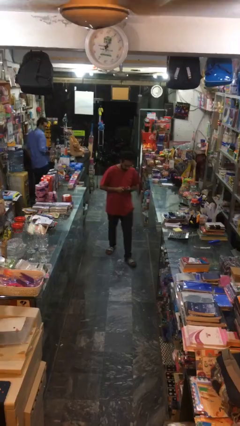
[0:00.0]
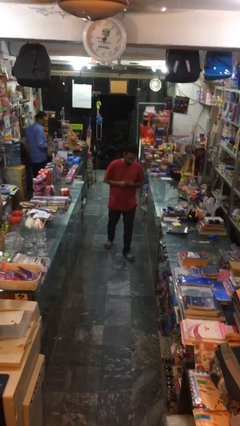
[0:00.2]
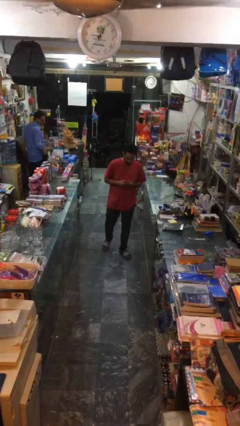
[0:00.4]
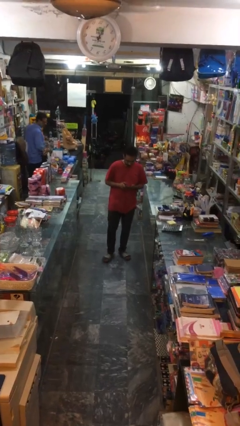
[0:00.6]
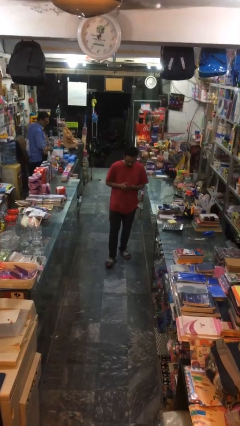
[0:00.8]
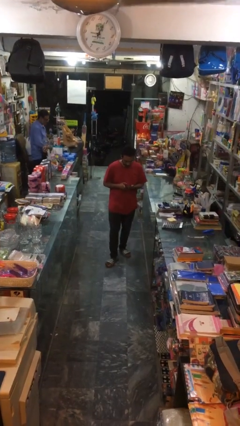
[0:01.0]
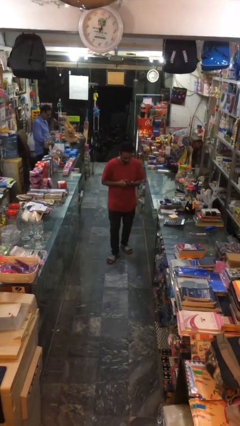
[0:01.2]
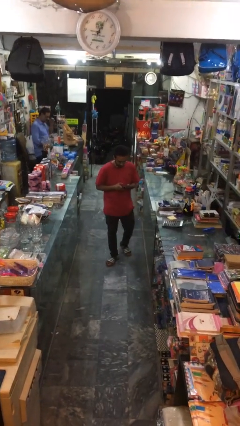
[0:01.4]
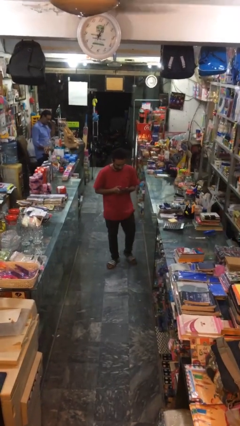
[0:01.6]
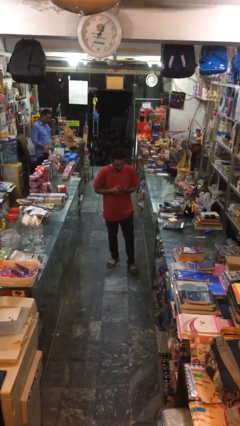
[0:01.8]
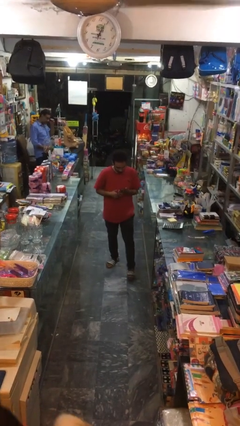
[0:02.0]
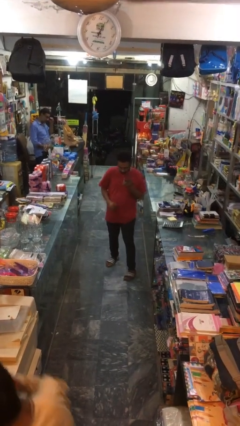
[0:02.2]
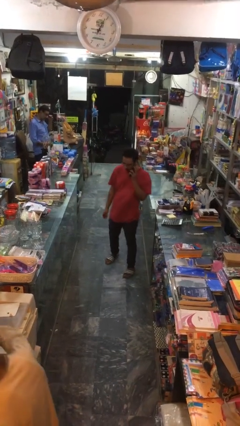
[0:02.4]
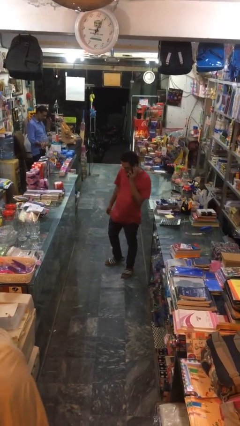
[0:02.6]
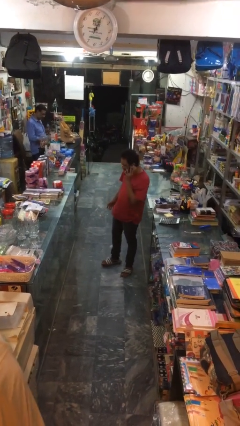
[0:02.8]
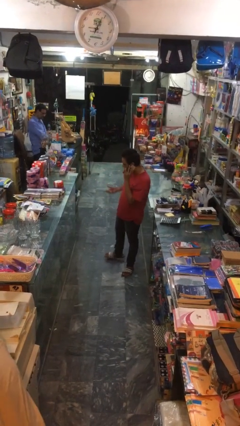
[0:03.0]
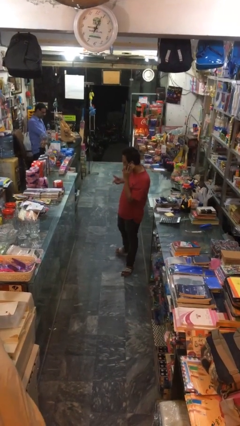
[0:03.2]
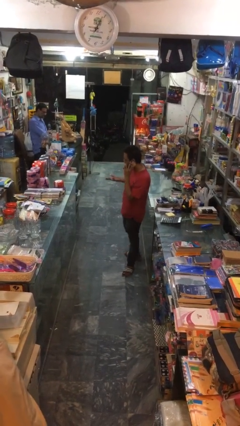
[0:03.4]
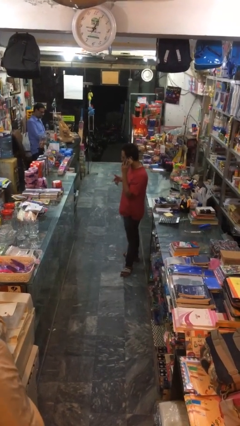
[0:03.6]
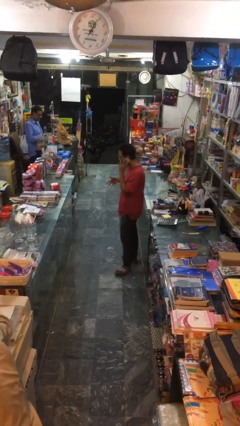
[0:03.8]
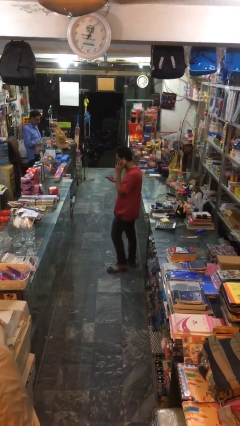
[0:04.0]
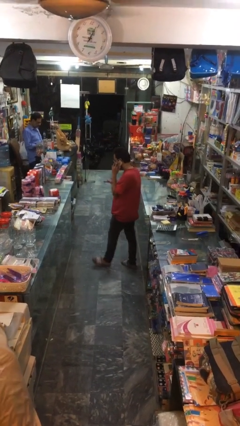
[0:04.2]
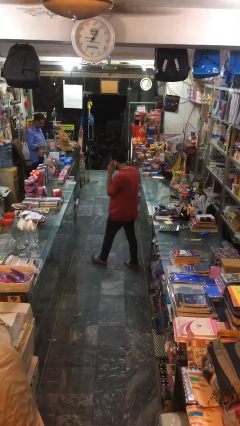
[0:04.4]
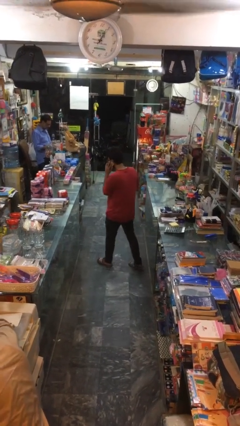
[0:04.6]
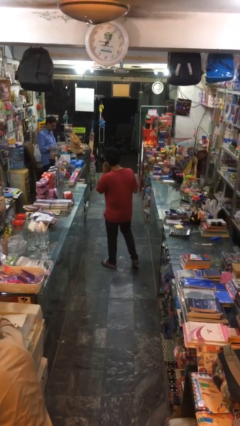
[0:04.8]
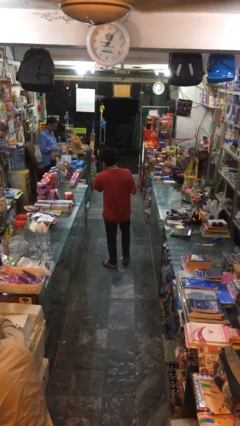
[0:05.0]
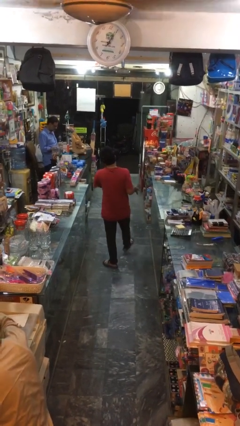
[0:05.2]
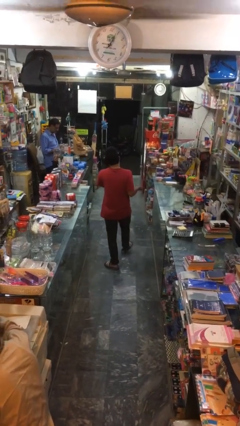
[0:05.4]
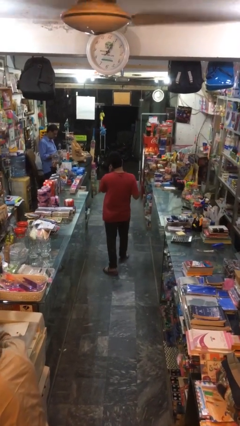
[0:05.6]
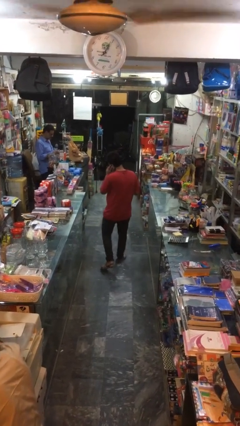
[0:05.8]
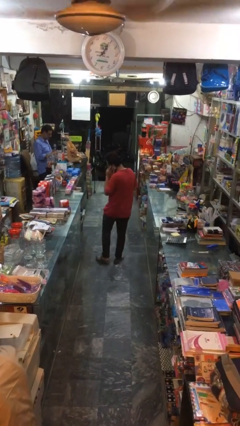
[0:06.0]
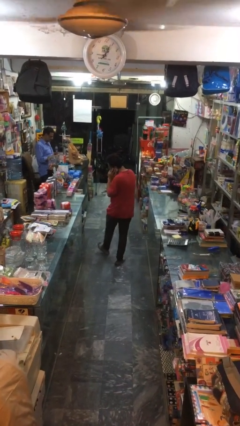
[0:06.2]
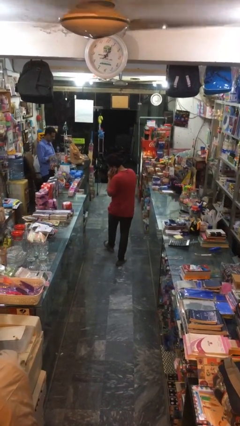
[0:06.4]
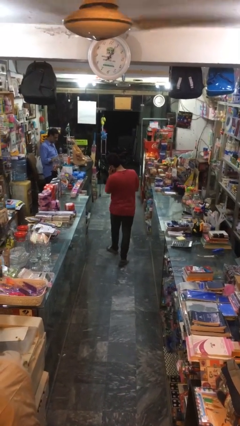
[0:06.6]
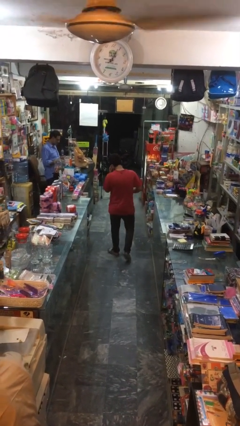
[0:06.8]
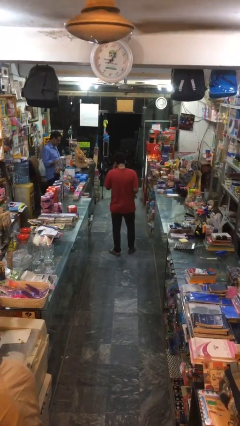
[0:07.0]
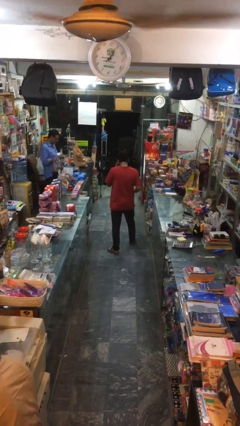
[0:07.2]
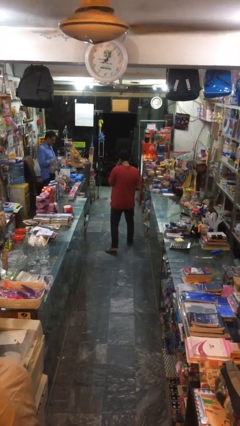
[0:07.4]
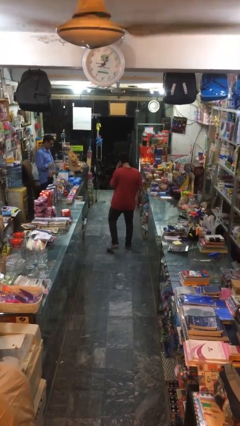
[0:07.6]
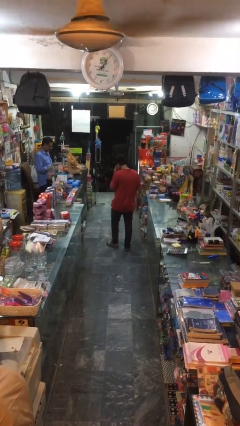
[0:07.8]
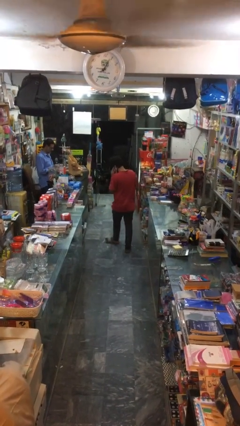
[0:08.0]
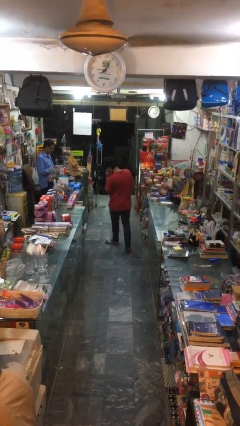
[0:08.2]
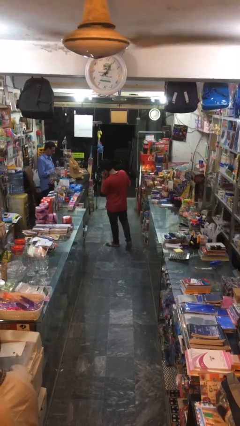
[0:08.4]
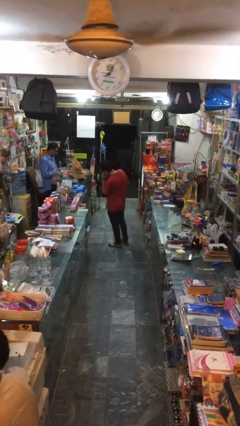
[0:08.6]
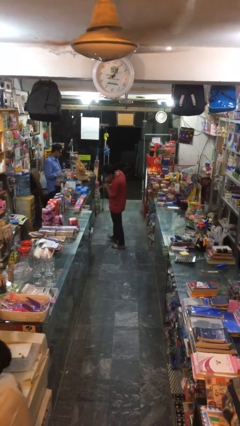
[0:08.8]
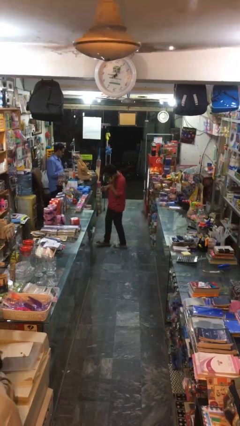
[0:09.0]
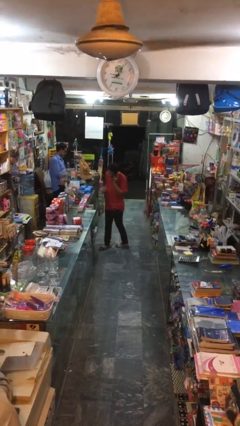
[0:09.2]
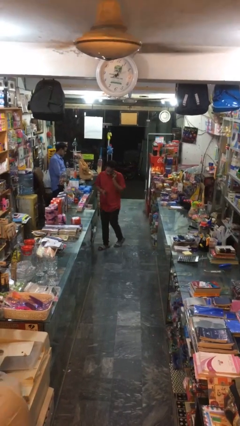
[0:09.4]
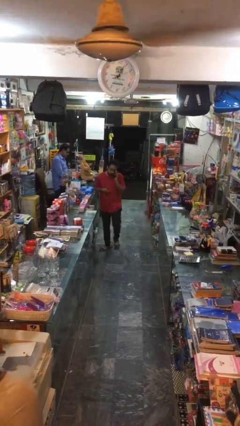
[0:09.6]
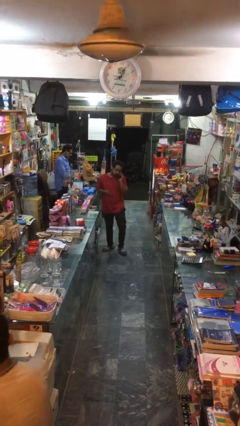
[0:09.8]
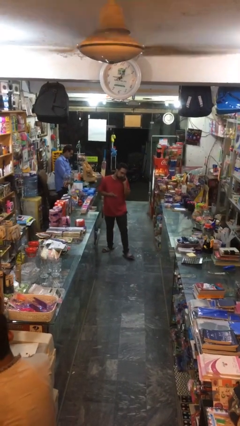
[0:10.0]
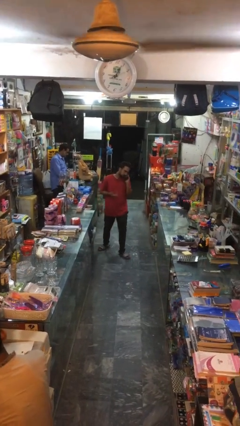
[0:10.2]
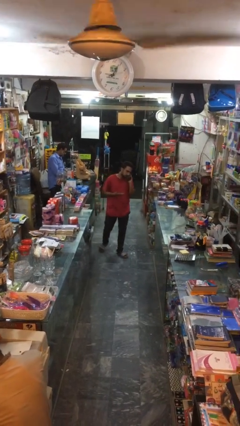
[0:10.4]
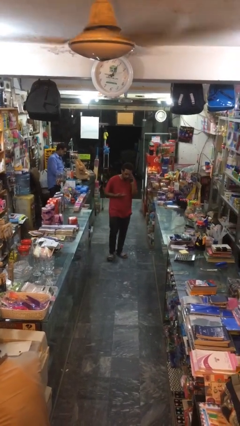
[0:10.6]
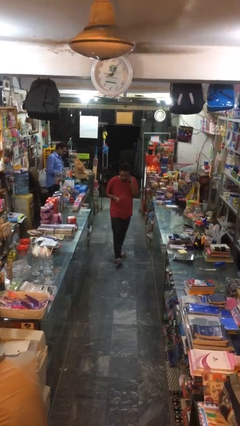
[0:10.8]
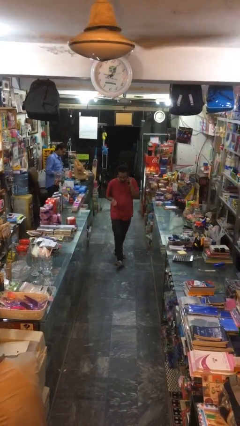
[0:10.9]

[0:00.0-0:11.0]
person talks on phone

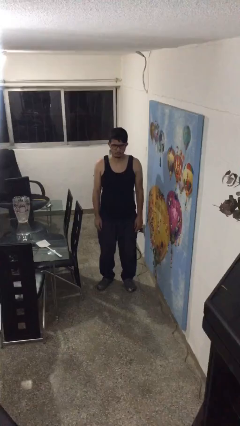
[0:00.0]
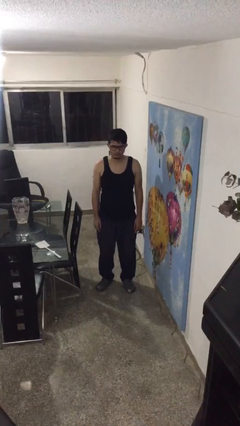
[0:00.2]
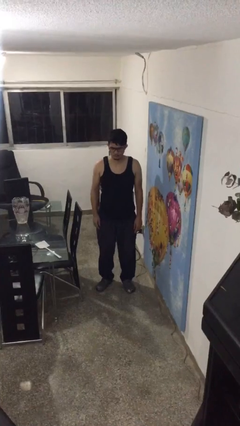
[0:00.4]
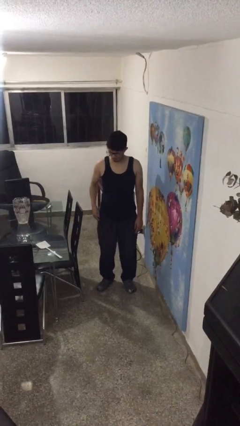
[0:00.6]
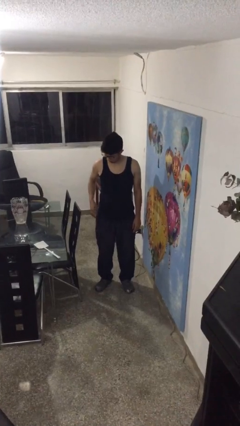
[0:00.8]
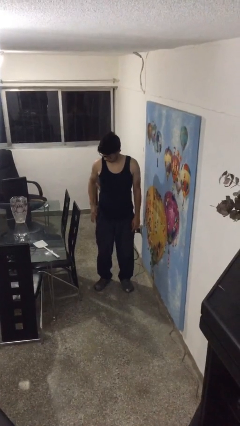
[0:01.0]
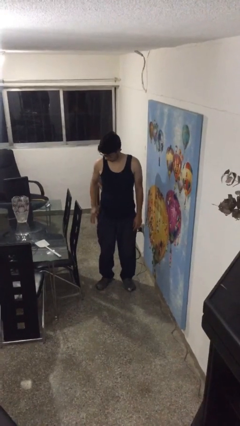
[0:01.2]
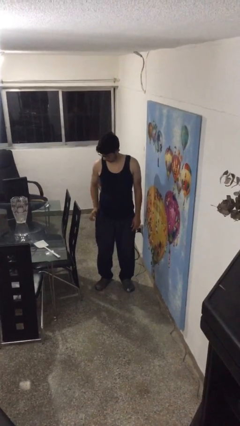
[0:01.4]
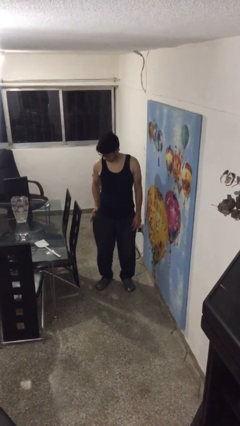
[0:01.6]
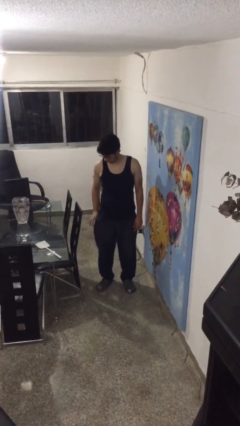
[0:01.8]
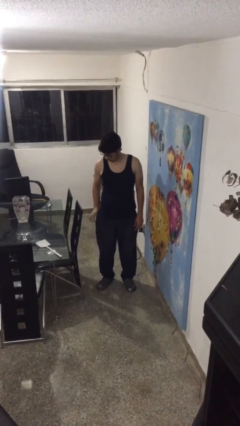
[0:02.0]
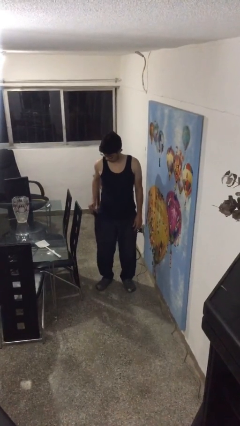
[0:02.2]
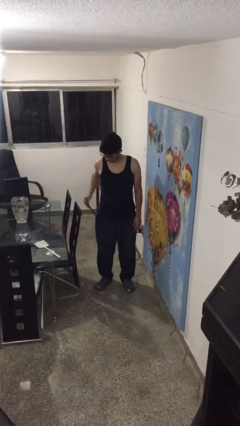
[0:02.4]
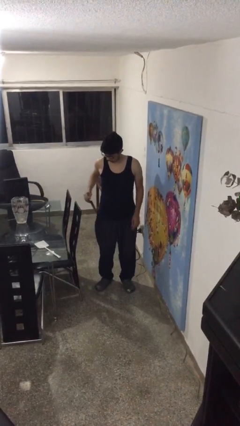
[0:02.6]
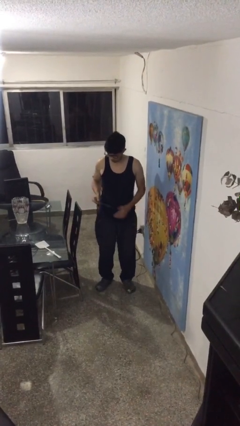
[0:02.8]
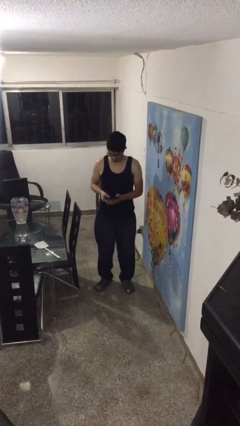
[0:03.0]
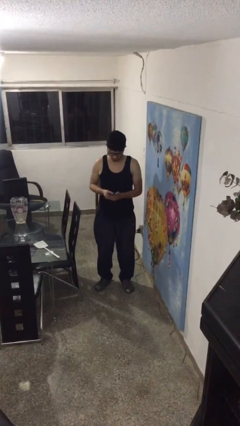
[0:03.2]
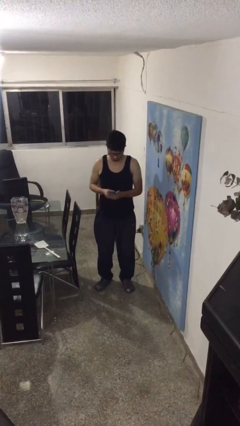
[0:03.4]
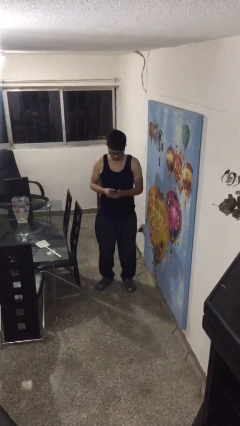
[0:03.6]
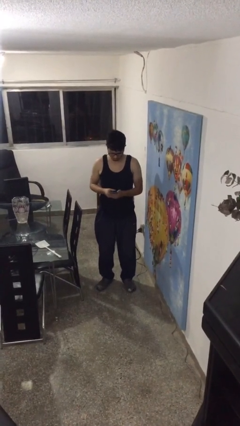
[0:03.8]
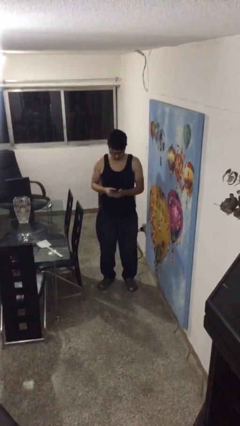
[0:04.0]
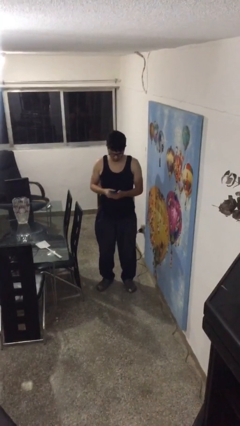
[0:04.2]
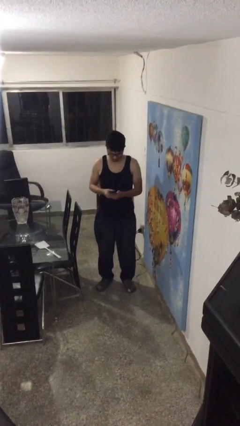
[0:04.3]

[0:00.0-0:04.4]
person takes phone from pocket

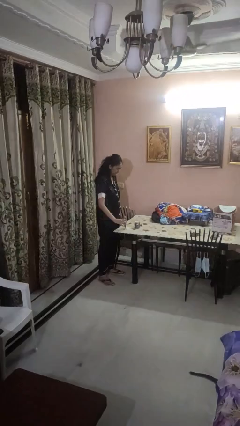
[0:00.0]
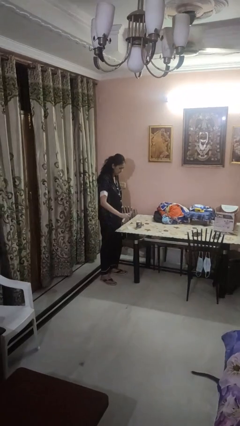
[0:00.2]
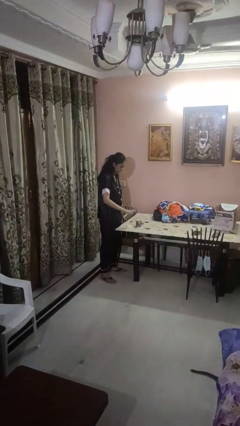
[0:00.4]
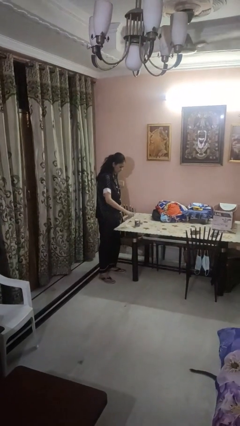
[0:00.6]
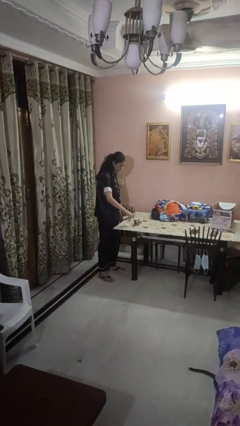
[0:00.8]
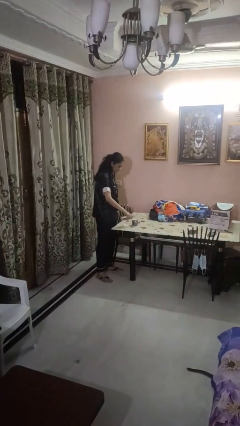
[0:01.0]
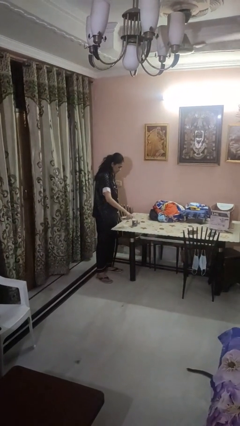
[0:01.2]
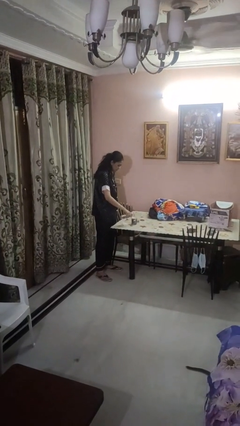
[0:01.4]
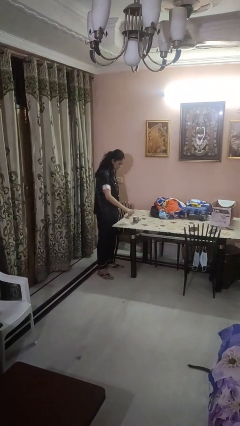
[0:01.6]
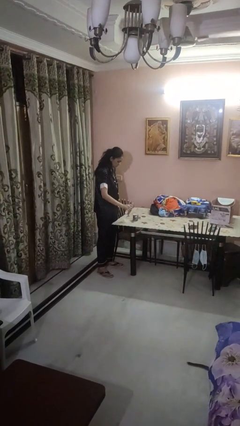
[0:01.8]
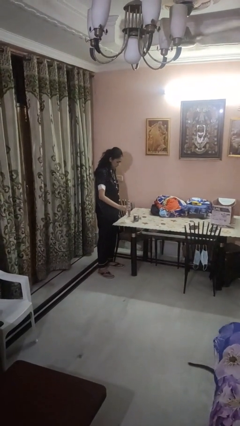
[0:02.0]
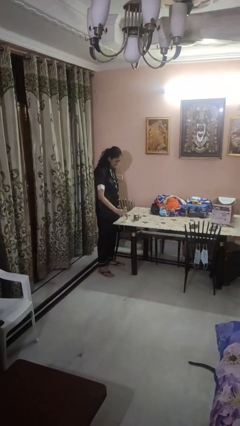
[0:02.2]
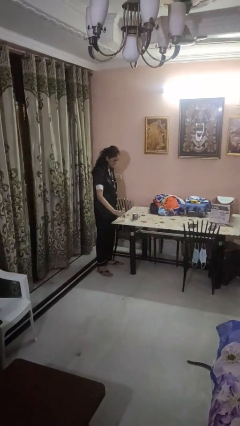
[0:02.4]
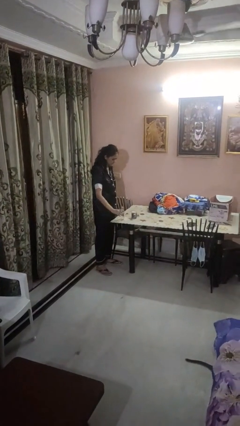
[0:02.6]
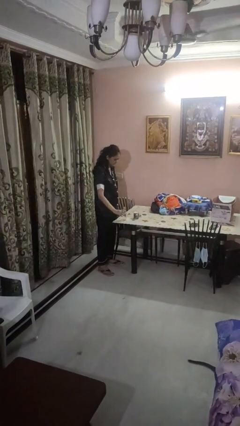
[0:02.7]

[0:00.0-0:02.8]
person pours liquid into cup
